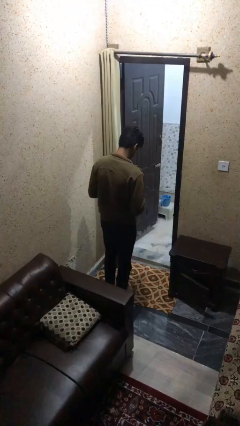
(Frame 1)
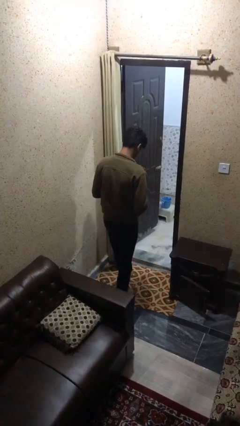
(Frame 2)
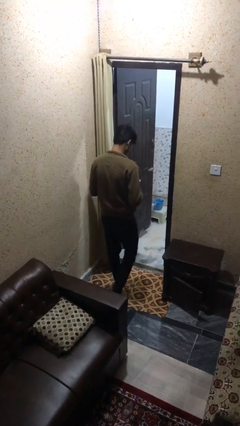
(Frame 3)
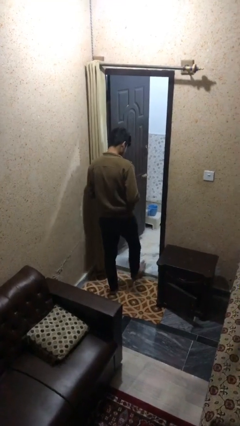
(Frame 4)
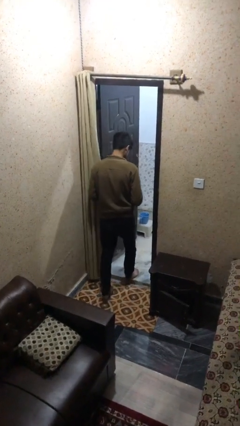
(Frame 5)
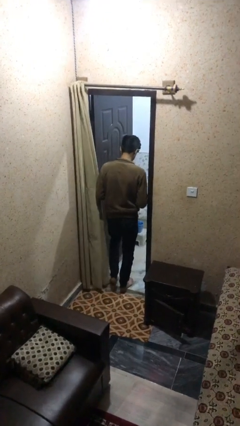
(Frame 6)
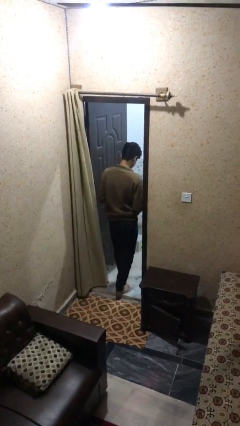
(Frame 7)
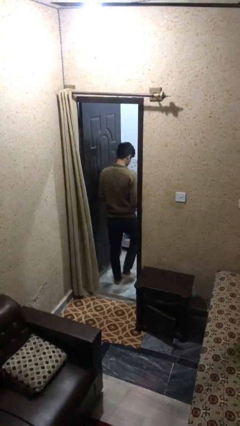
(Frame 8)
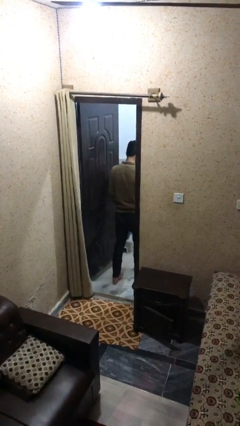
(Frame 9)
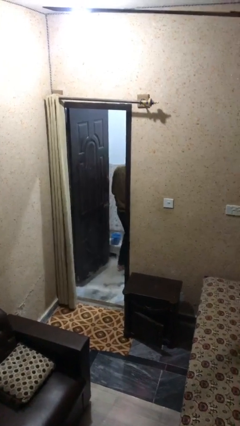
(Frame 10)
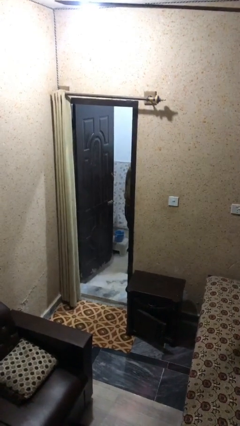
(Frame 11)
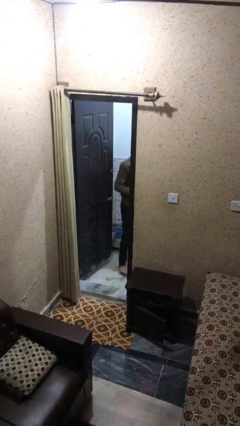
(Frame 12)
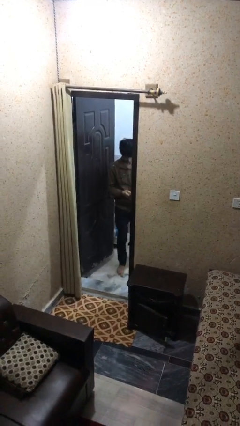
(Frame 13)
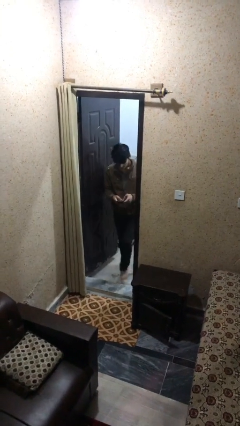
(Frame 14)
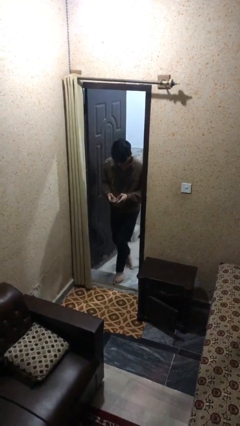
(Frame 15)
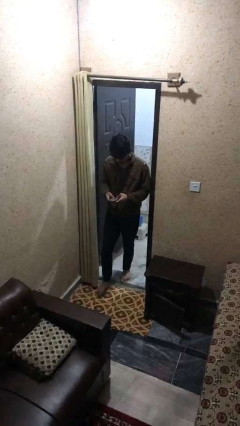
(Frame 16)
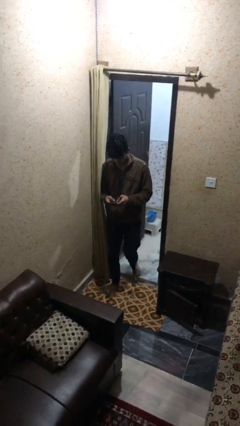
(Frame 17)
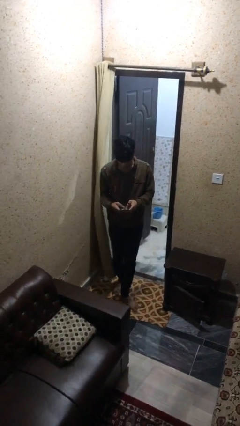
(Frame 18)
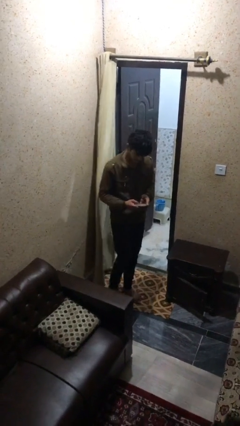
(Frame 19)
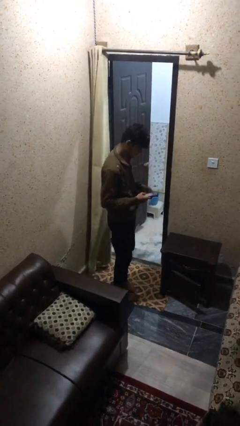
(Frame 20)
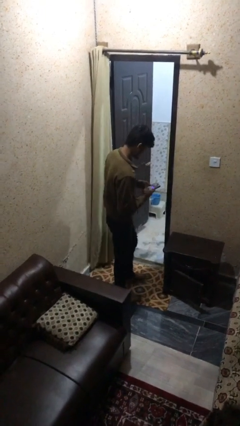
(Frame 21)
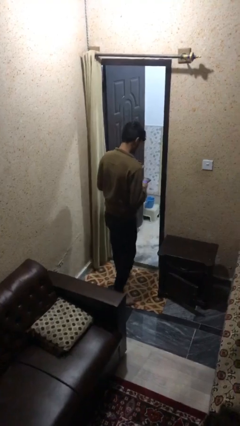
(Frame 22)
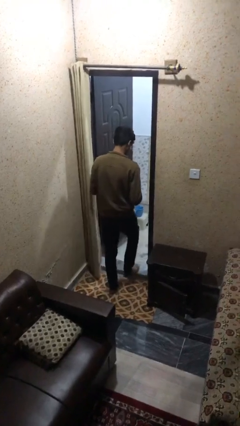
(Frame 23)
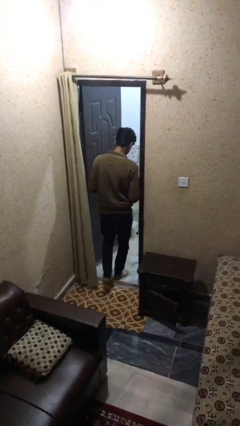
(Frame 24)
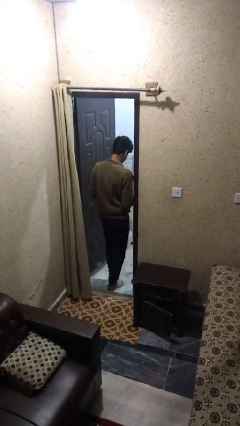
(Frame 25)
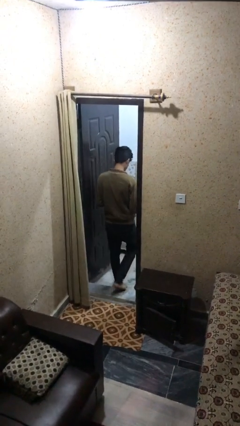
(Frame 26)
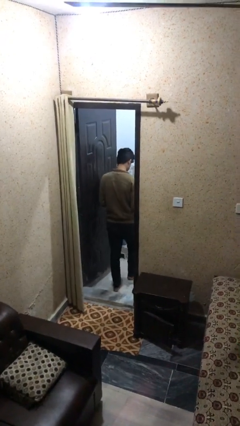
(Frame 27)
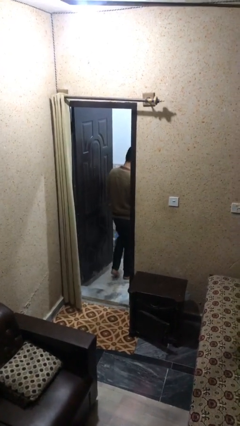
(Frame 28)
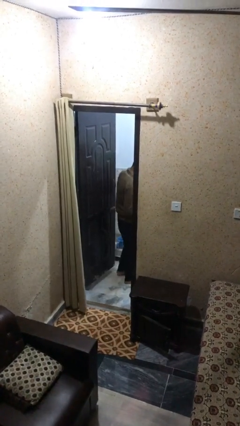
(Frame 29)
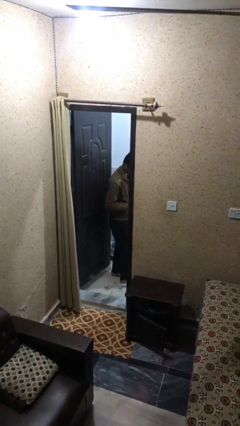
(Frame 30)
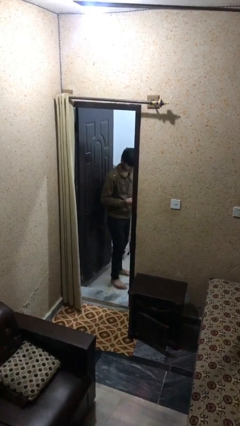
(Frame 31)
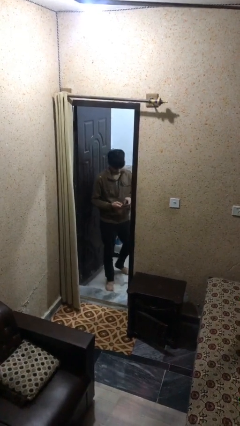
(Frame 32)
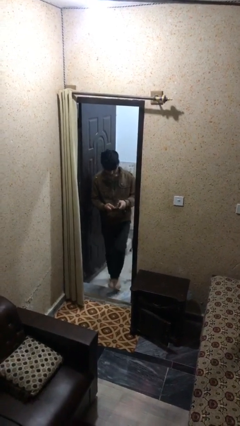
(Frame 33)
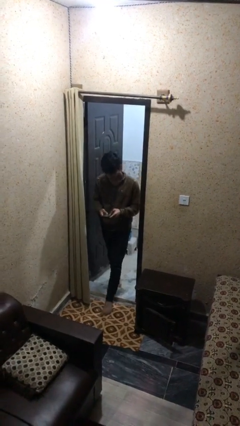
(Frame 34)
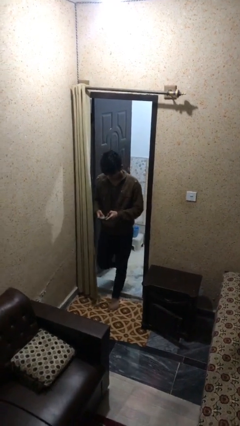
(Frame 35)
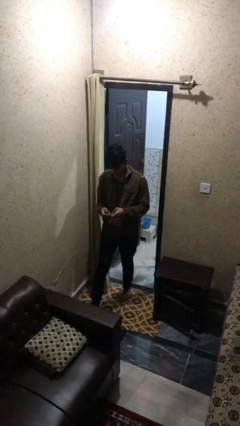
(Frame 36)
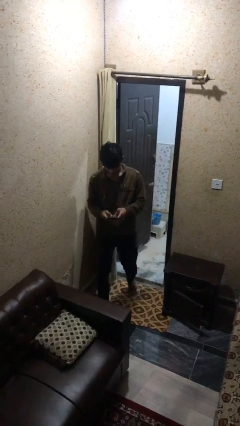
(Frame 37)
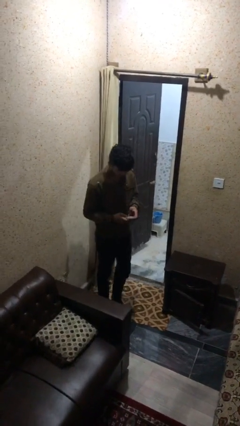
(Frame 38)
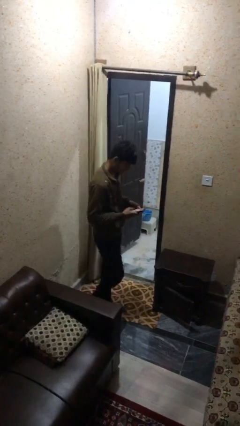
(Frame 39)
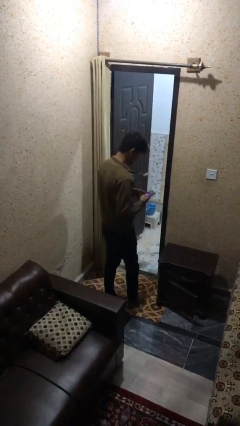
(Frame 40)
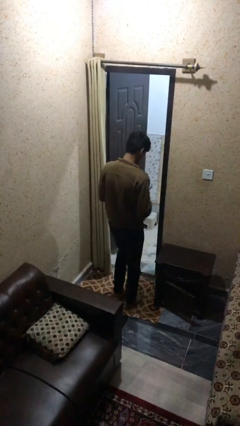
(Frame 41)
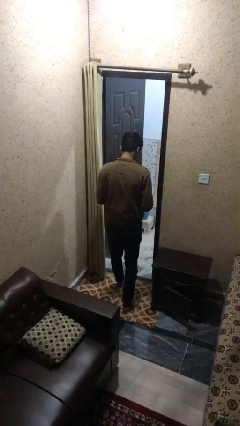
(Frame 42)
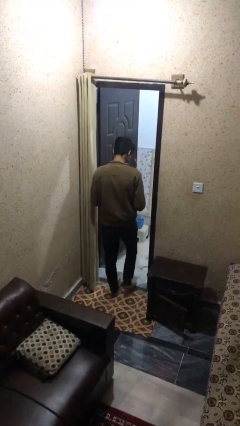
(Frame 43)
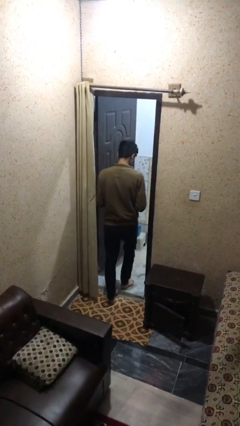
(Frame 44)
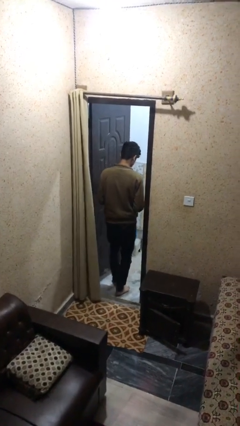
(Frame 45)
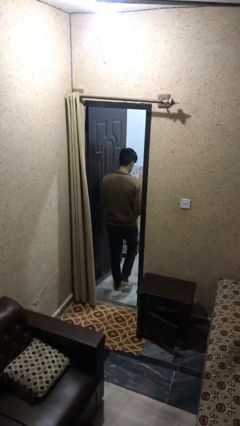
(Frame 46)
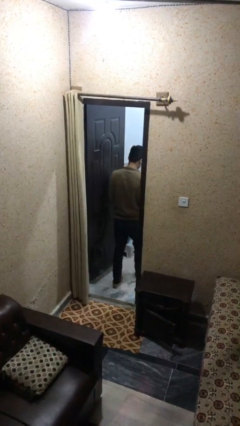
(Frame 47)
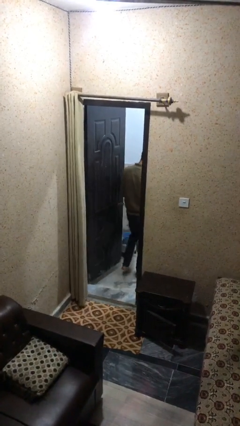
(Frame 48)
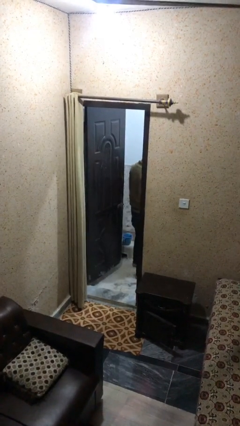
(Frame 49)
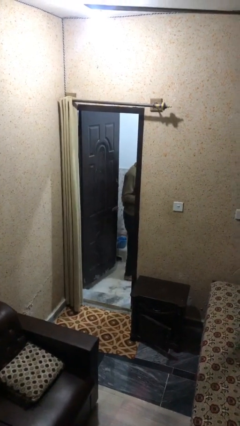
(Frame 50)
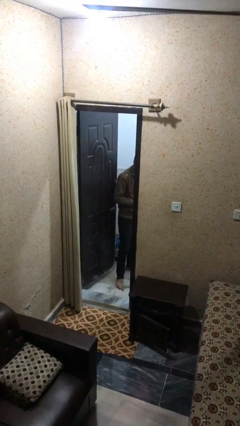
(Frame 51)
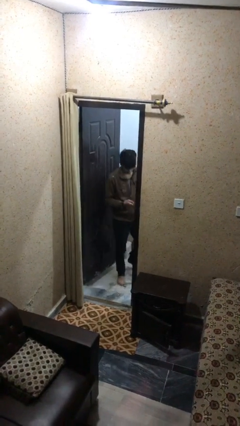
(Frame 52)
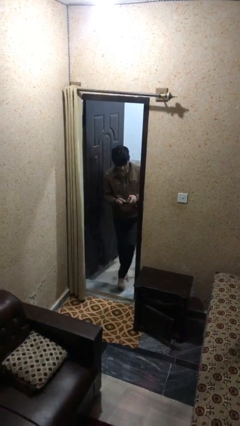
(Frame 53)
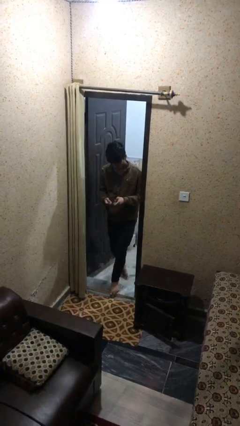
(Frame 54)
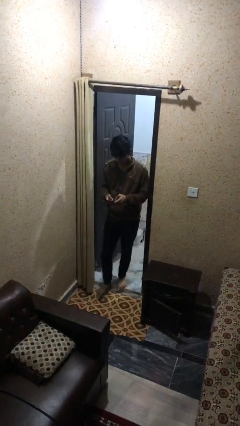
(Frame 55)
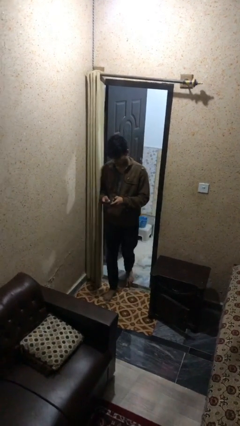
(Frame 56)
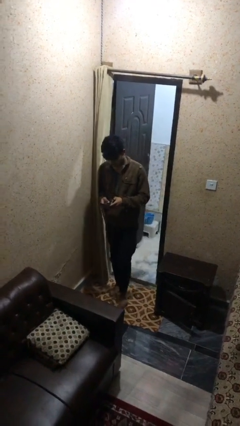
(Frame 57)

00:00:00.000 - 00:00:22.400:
person texts on phone

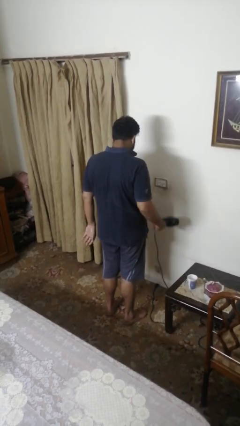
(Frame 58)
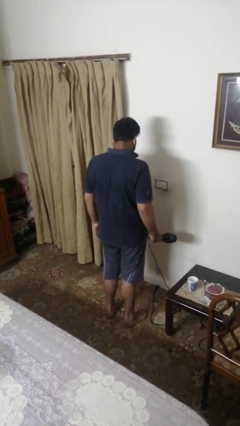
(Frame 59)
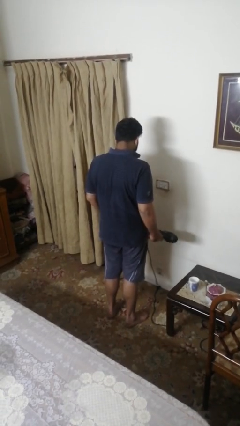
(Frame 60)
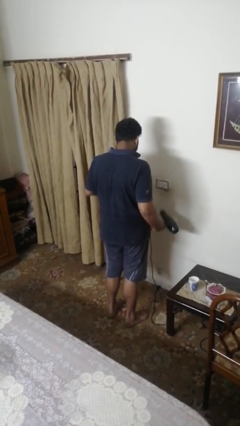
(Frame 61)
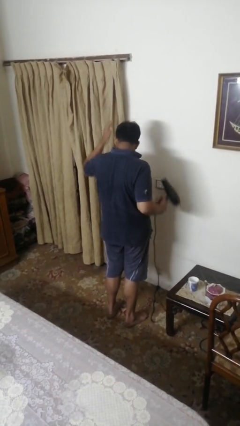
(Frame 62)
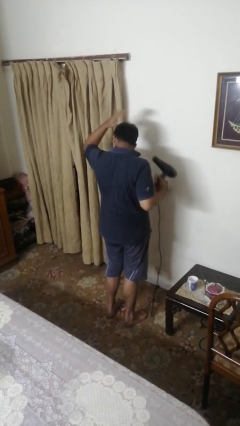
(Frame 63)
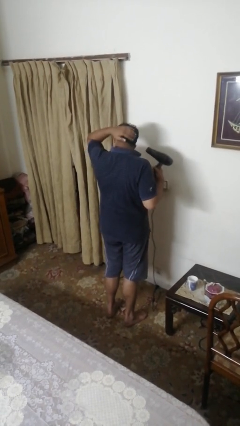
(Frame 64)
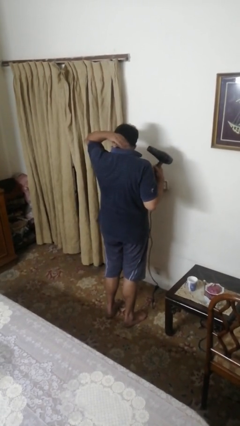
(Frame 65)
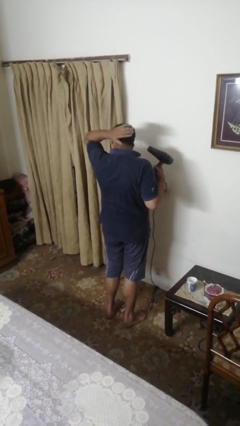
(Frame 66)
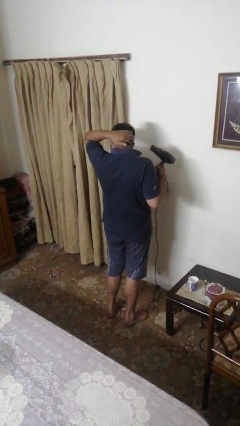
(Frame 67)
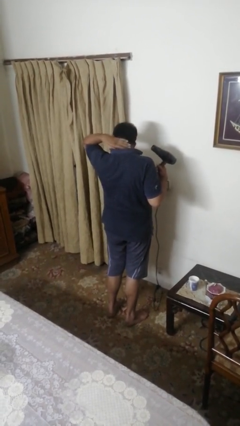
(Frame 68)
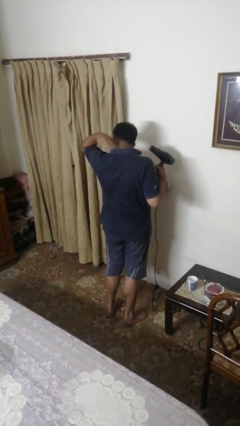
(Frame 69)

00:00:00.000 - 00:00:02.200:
person dries hair with hairdryer

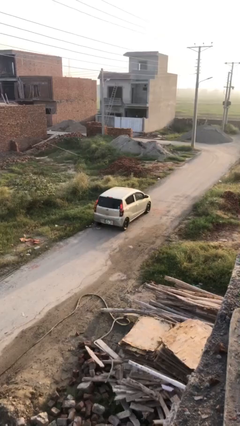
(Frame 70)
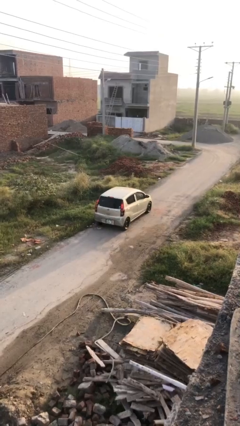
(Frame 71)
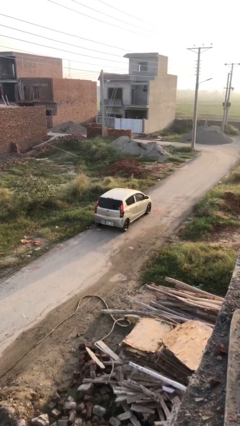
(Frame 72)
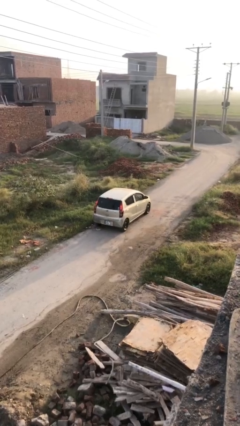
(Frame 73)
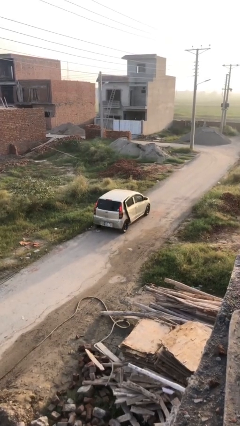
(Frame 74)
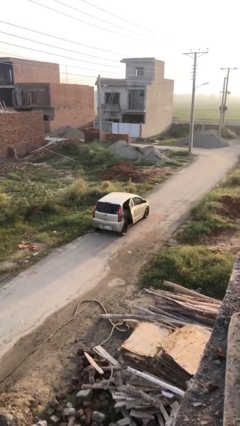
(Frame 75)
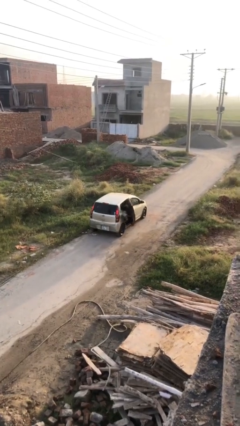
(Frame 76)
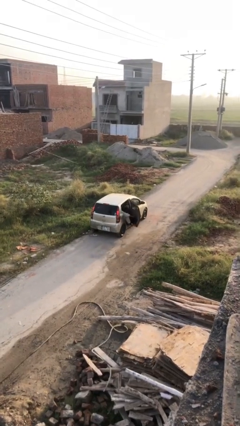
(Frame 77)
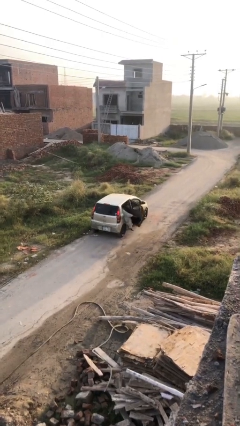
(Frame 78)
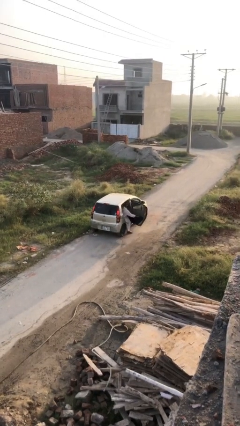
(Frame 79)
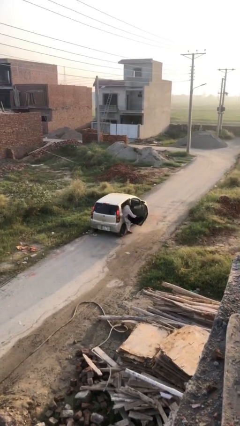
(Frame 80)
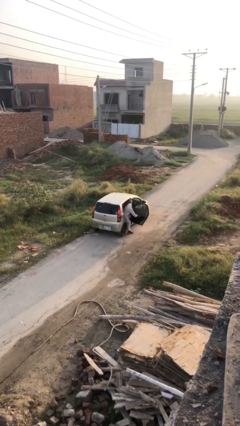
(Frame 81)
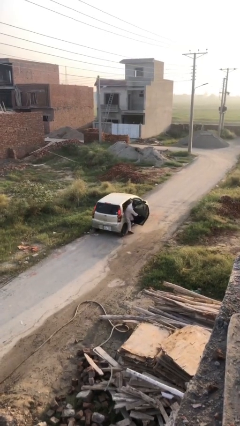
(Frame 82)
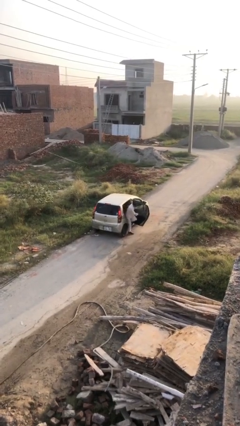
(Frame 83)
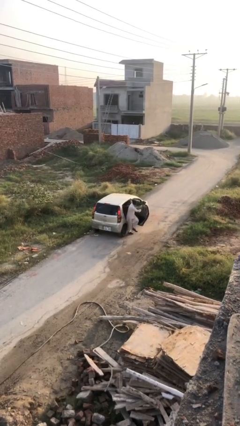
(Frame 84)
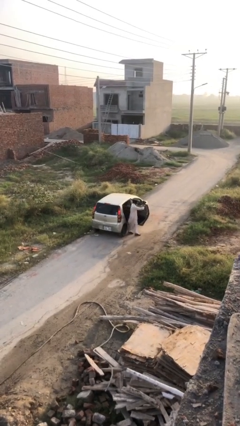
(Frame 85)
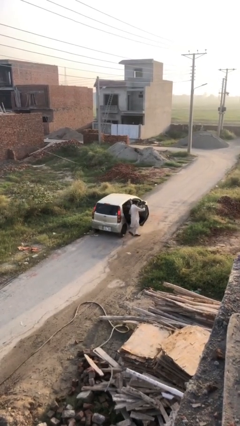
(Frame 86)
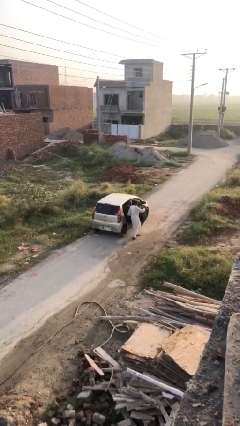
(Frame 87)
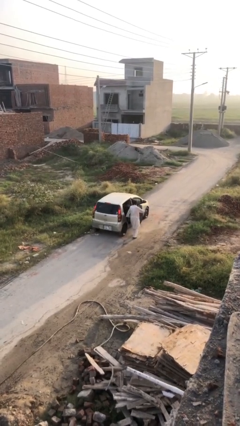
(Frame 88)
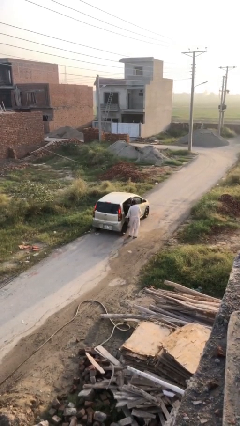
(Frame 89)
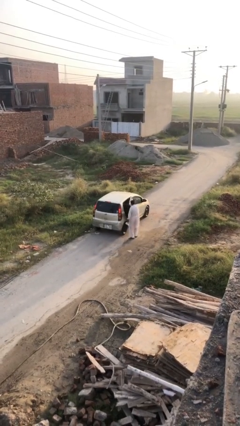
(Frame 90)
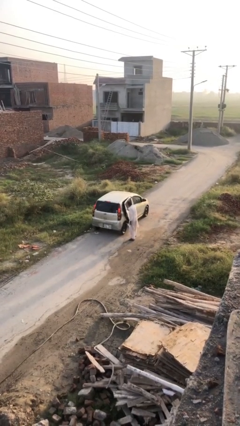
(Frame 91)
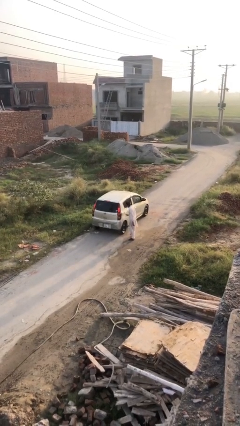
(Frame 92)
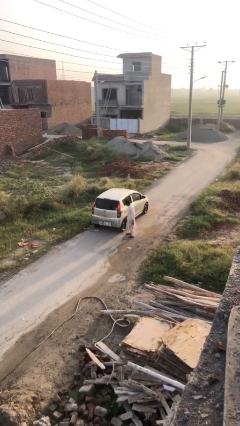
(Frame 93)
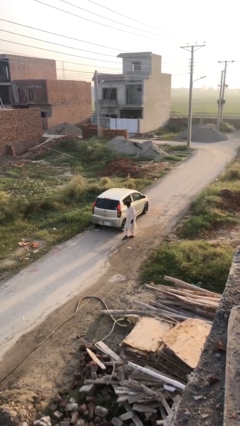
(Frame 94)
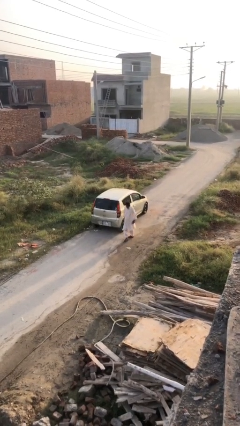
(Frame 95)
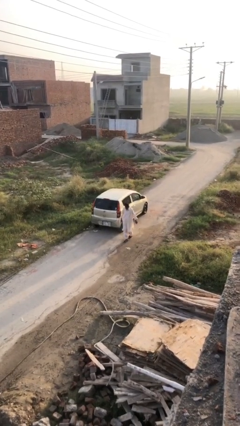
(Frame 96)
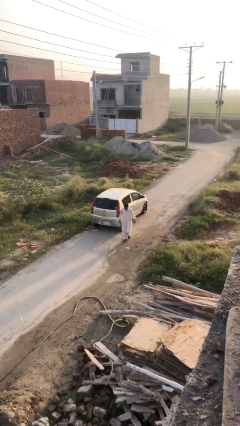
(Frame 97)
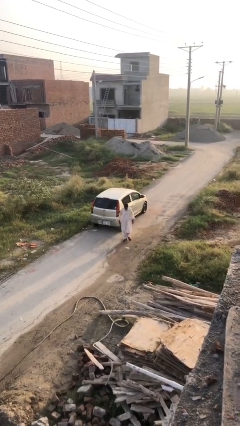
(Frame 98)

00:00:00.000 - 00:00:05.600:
car drops off person
